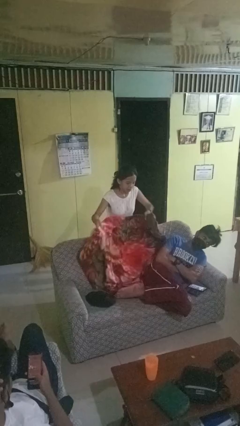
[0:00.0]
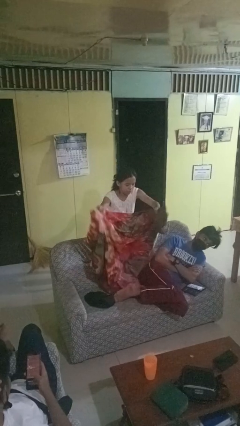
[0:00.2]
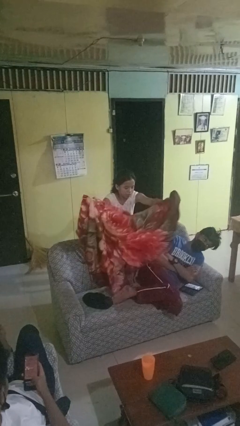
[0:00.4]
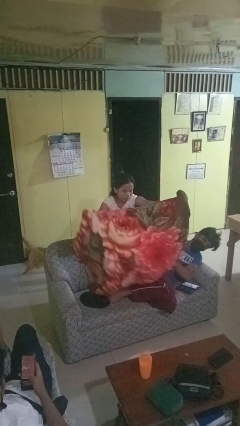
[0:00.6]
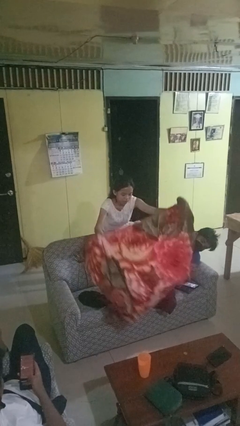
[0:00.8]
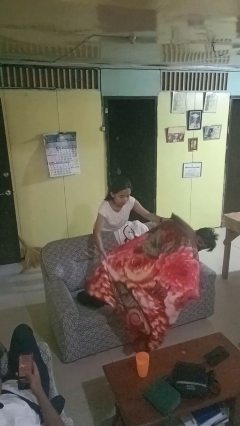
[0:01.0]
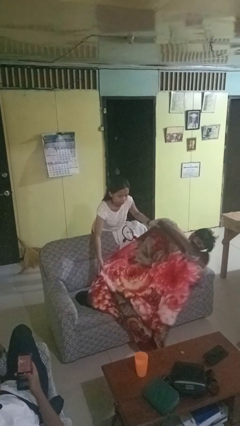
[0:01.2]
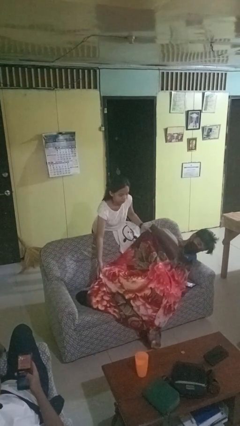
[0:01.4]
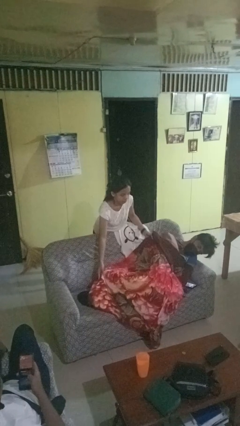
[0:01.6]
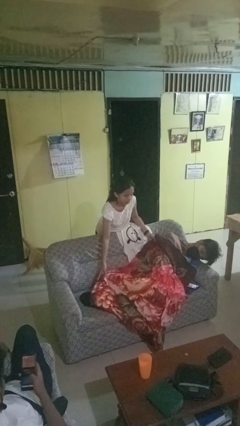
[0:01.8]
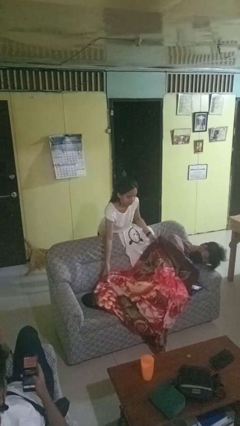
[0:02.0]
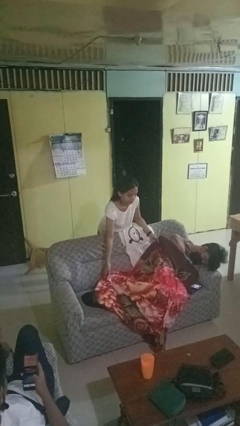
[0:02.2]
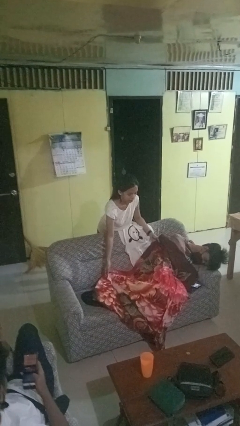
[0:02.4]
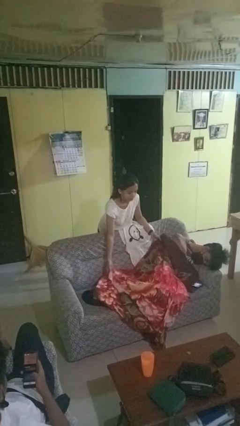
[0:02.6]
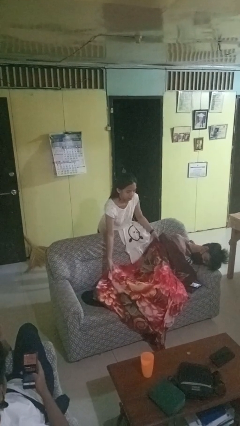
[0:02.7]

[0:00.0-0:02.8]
person covers friend with blanket

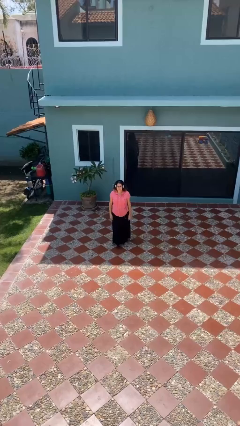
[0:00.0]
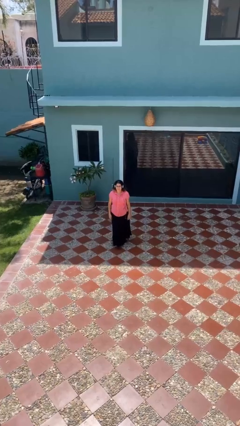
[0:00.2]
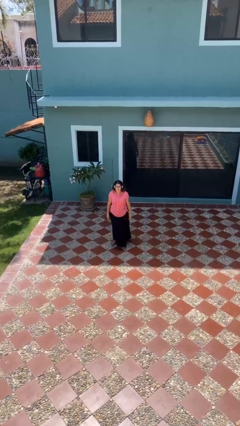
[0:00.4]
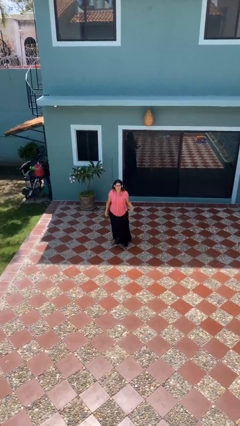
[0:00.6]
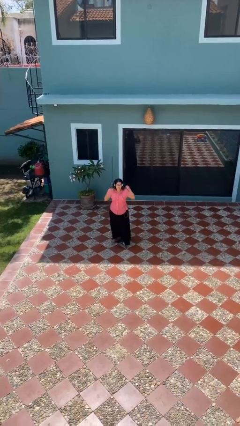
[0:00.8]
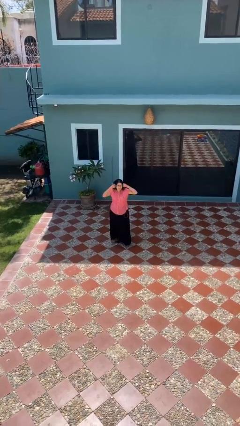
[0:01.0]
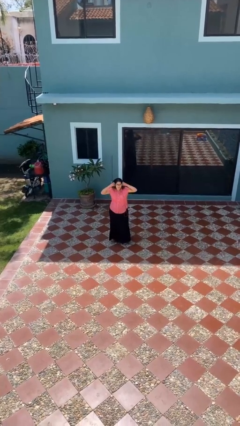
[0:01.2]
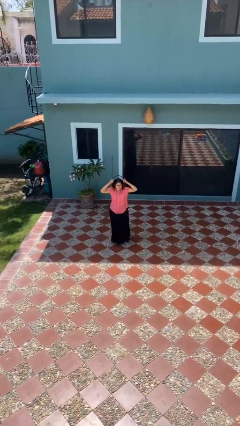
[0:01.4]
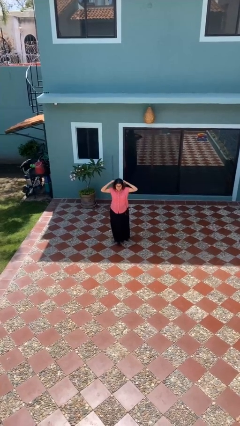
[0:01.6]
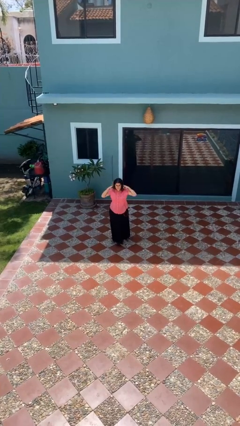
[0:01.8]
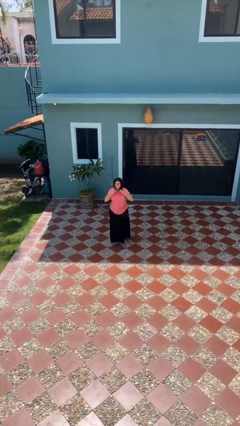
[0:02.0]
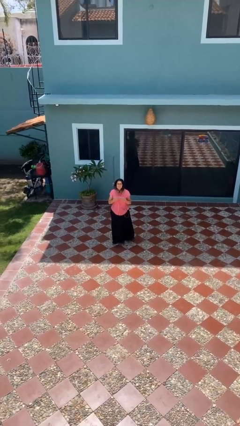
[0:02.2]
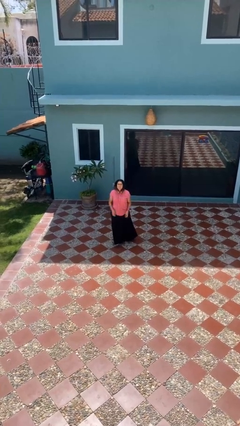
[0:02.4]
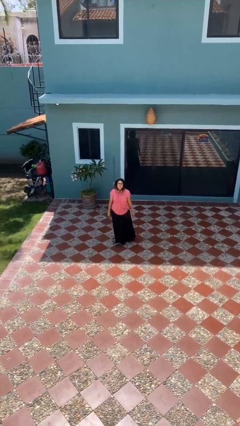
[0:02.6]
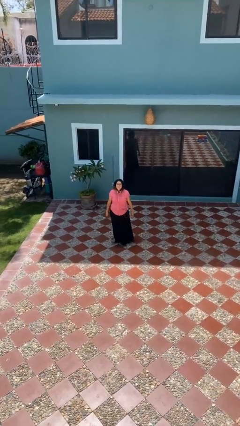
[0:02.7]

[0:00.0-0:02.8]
person takes off headphones

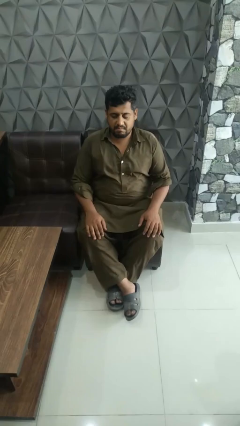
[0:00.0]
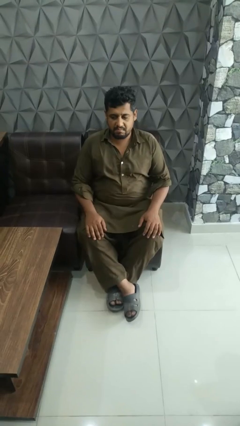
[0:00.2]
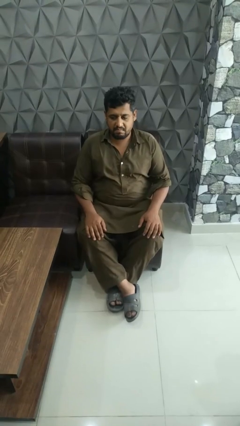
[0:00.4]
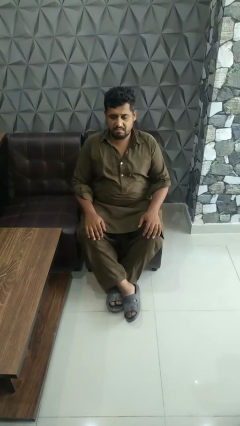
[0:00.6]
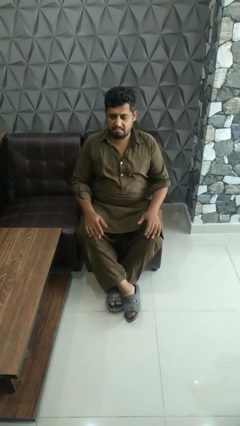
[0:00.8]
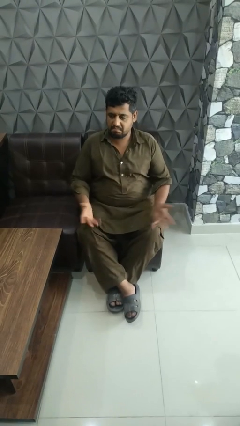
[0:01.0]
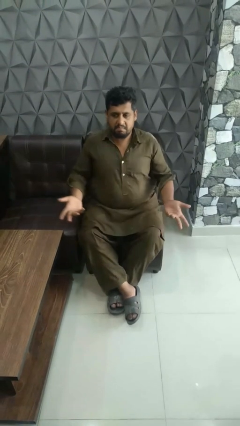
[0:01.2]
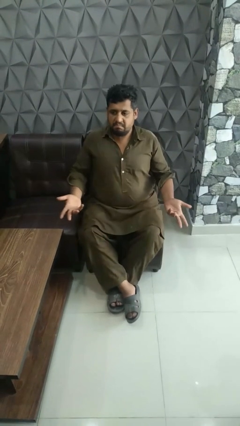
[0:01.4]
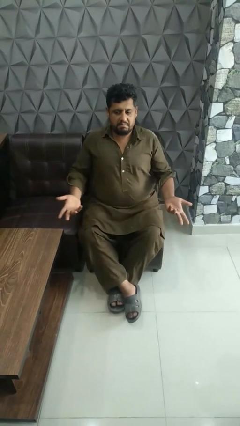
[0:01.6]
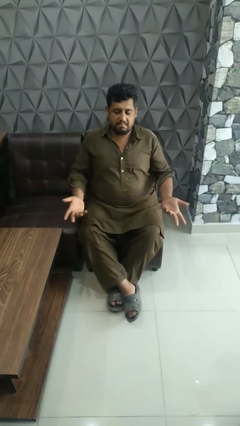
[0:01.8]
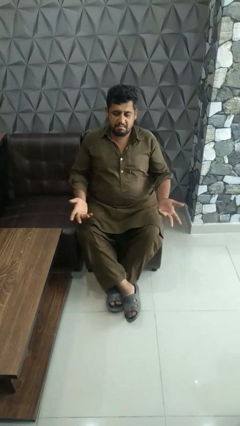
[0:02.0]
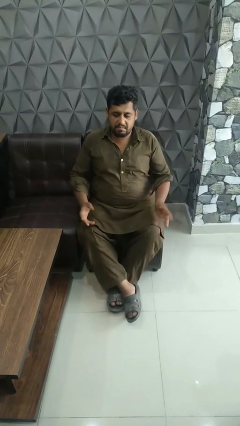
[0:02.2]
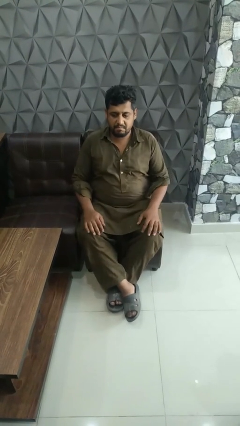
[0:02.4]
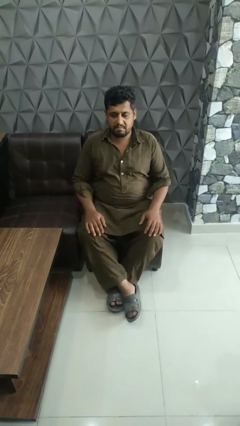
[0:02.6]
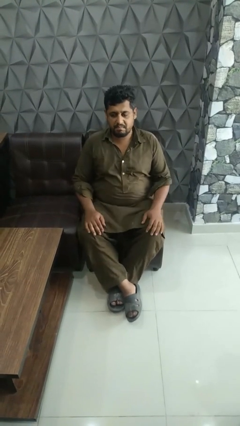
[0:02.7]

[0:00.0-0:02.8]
person shrugs

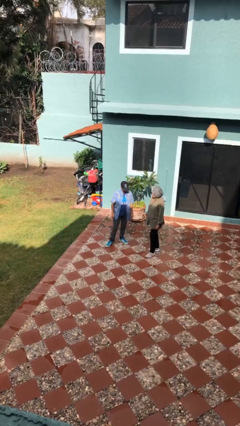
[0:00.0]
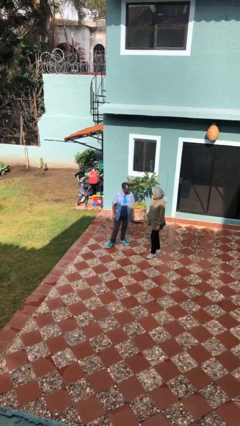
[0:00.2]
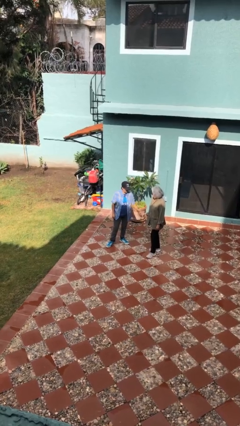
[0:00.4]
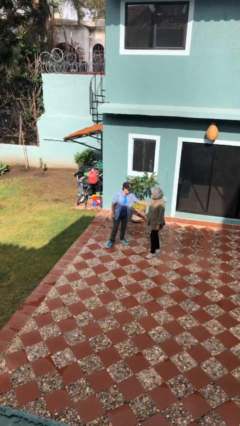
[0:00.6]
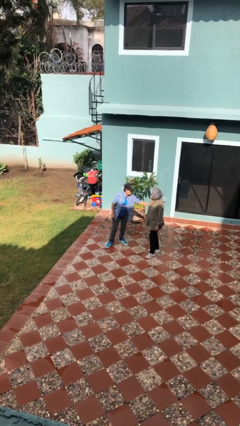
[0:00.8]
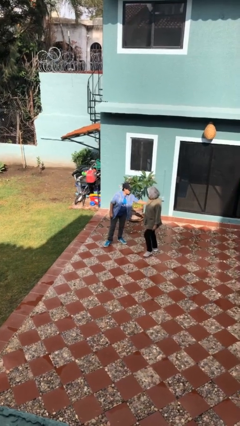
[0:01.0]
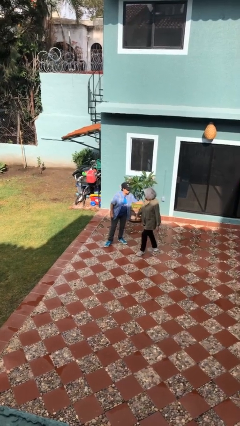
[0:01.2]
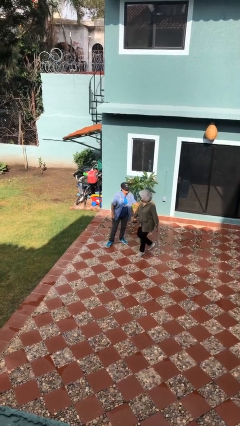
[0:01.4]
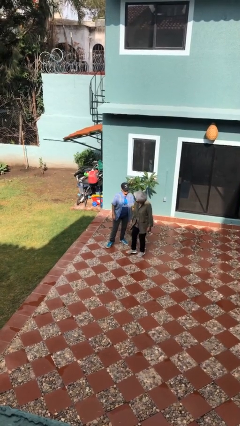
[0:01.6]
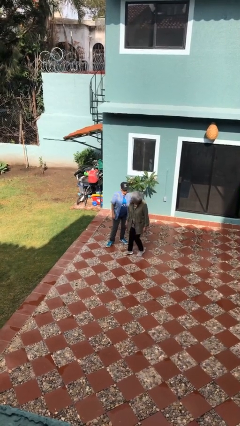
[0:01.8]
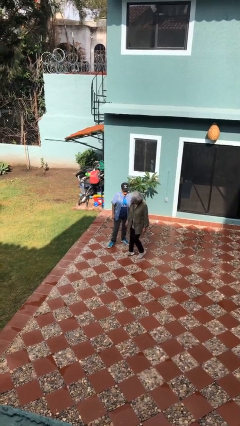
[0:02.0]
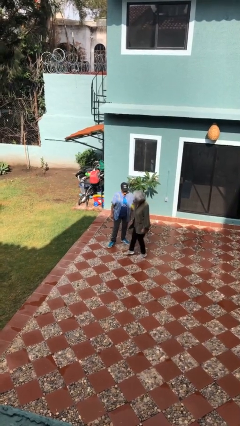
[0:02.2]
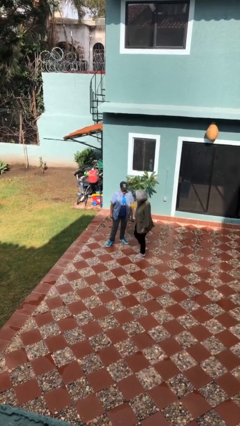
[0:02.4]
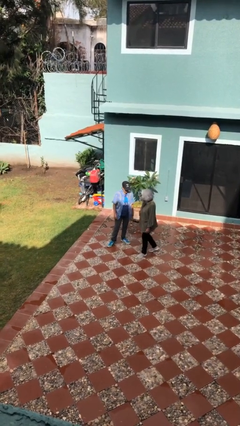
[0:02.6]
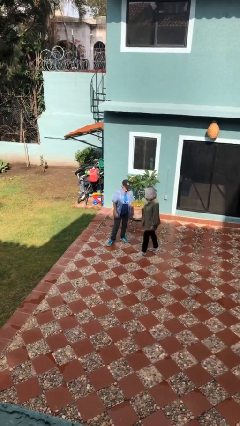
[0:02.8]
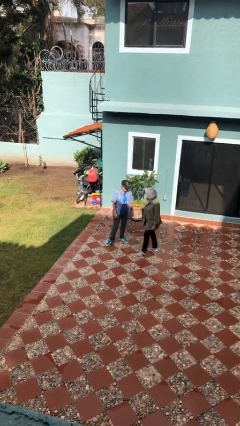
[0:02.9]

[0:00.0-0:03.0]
person grabs person by bicep

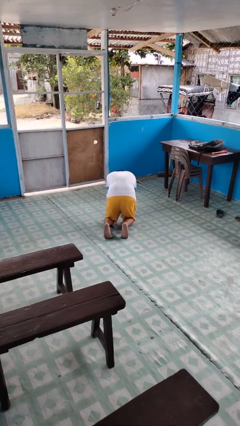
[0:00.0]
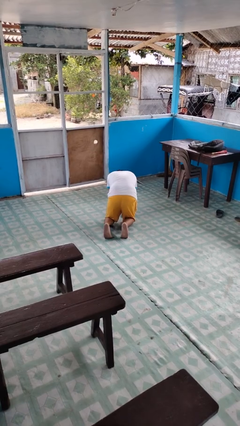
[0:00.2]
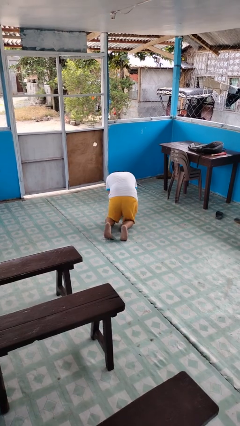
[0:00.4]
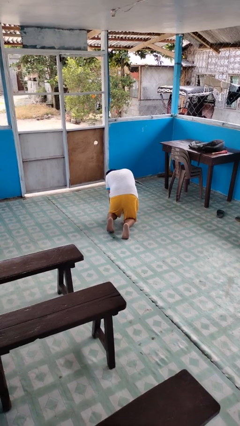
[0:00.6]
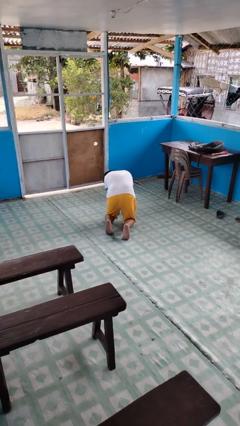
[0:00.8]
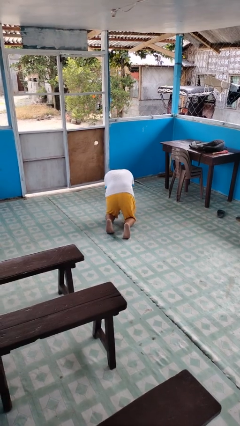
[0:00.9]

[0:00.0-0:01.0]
person crawls

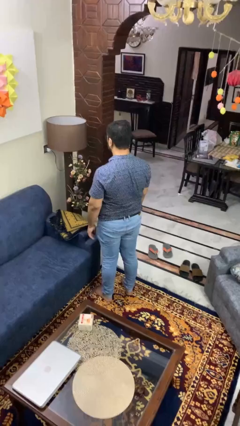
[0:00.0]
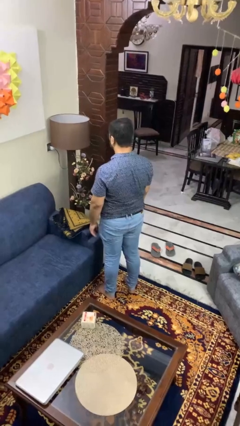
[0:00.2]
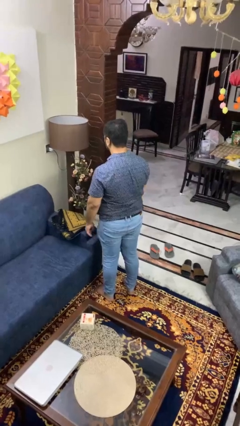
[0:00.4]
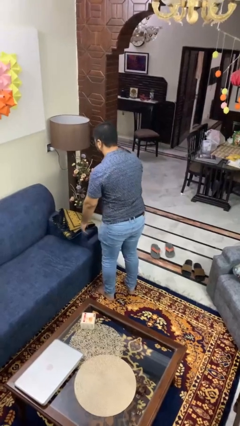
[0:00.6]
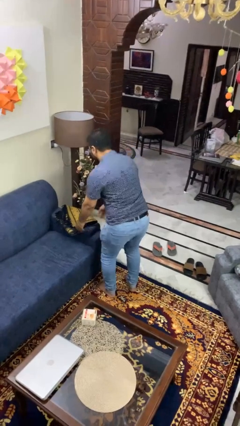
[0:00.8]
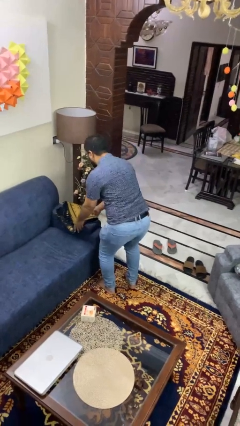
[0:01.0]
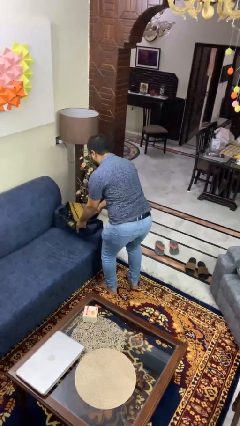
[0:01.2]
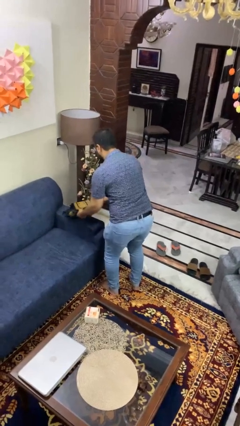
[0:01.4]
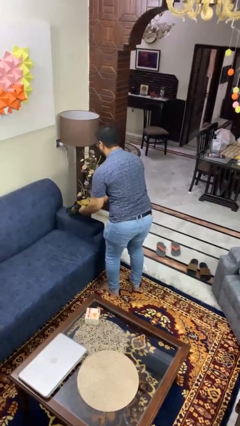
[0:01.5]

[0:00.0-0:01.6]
person picks up object from couch

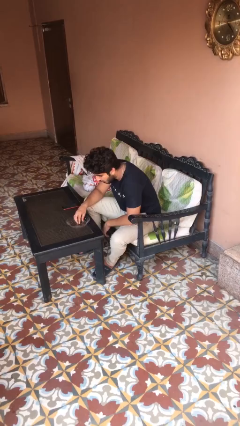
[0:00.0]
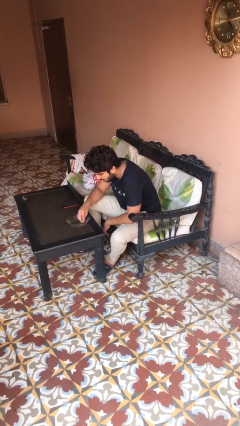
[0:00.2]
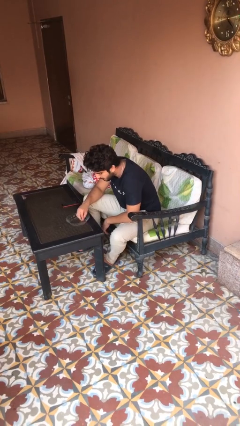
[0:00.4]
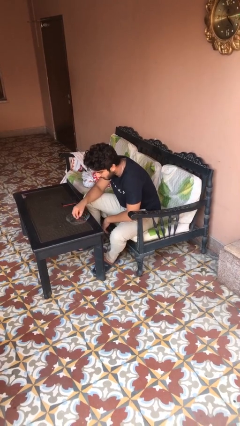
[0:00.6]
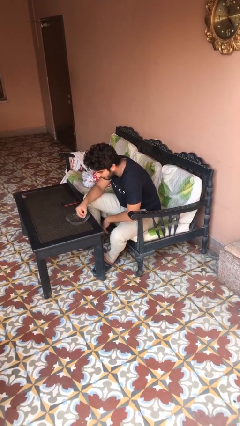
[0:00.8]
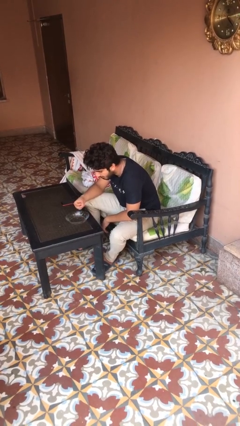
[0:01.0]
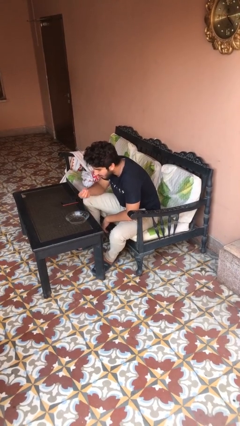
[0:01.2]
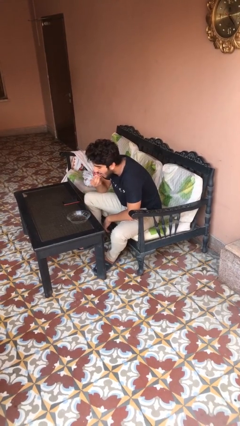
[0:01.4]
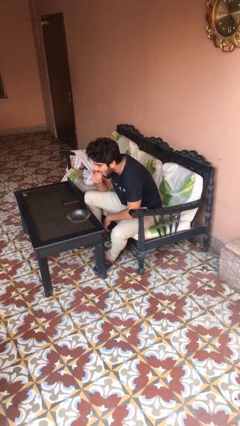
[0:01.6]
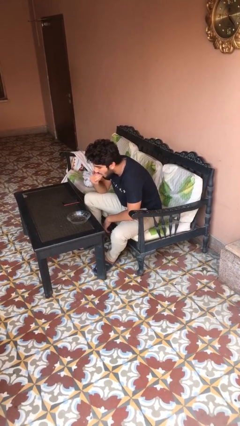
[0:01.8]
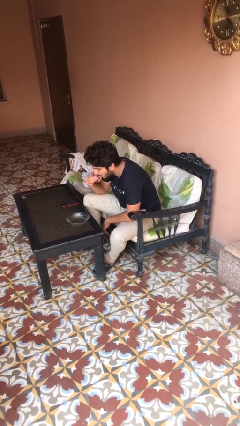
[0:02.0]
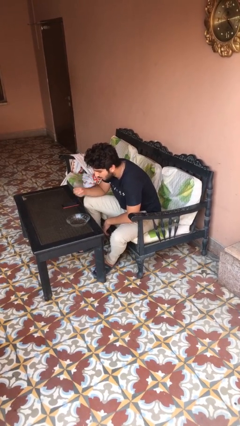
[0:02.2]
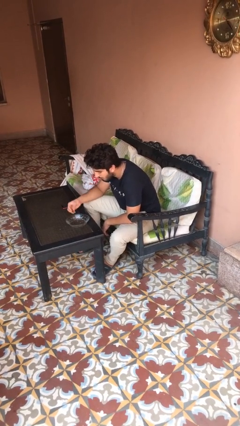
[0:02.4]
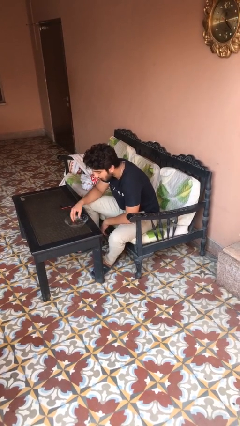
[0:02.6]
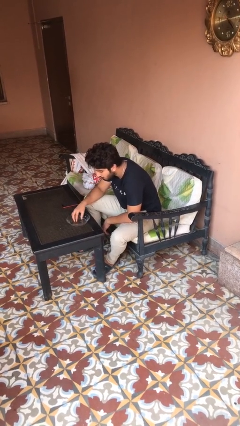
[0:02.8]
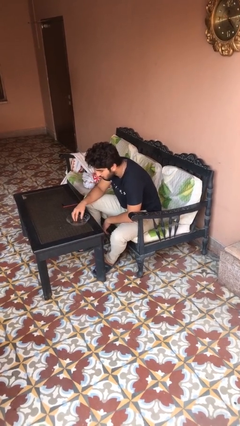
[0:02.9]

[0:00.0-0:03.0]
person eats with hands
